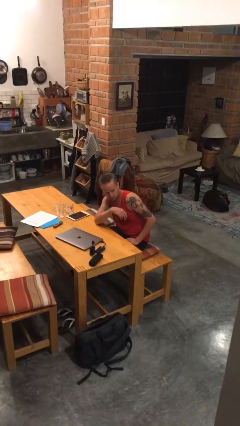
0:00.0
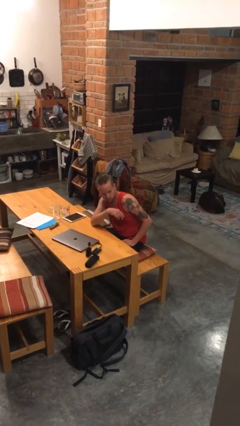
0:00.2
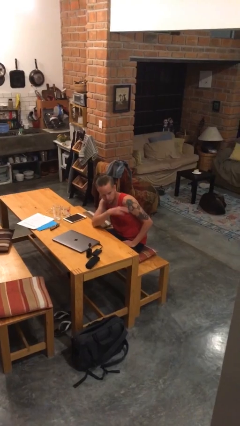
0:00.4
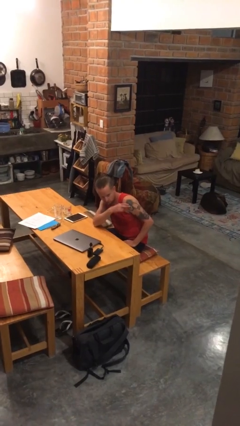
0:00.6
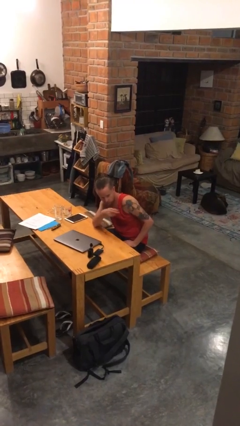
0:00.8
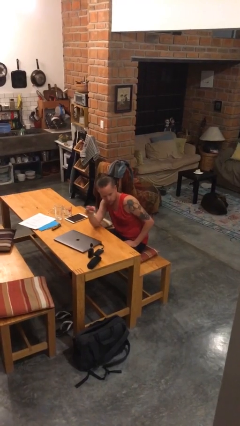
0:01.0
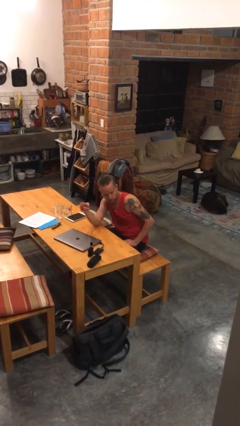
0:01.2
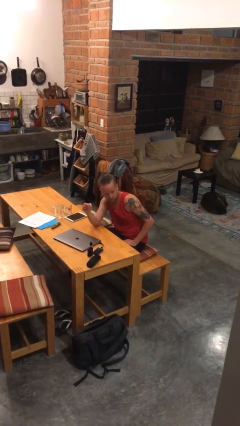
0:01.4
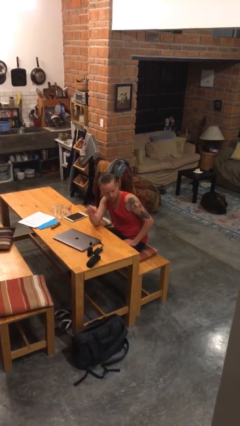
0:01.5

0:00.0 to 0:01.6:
person gestures swipe right

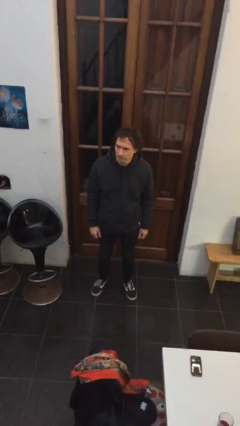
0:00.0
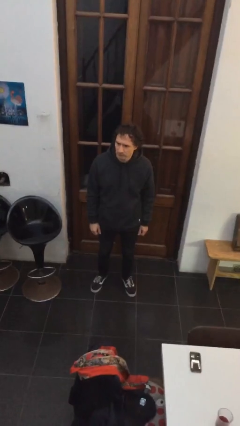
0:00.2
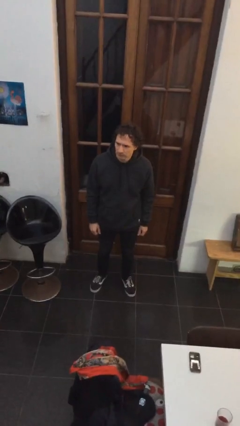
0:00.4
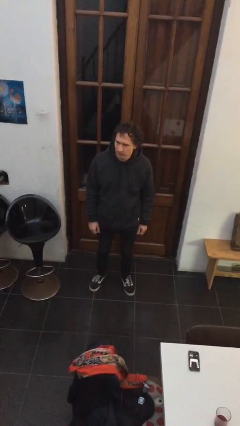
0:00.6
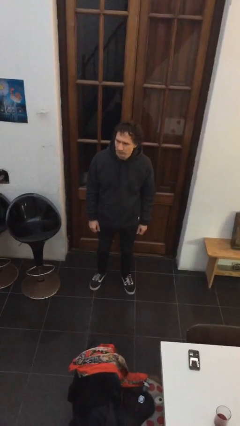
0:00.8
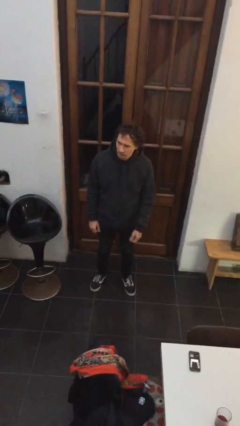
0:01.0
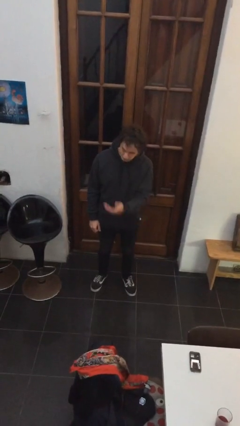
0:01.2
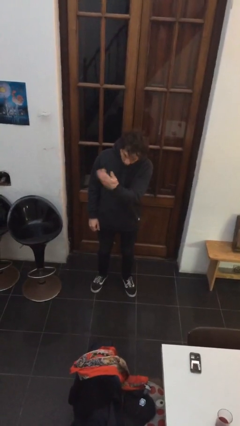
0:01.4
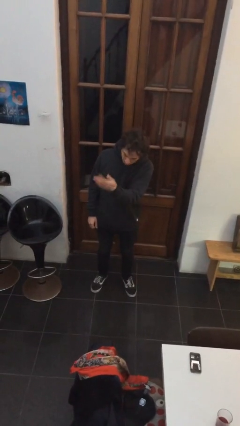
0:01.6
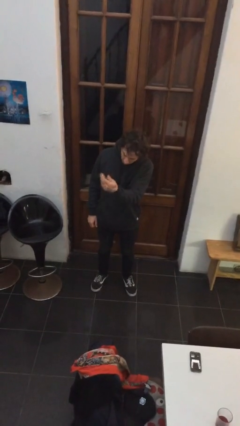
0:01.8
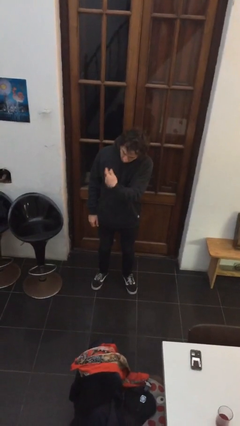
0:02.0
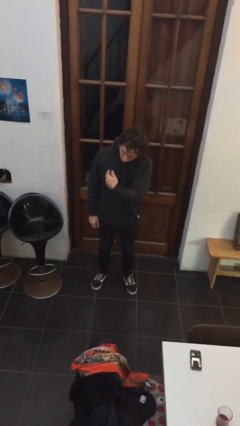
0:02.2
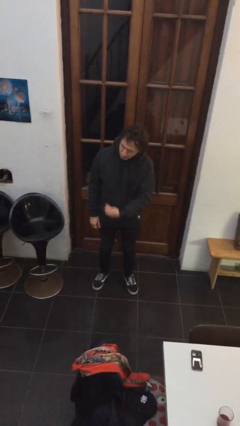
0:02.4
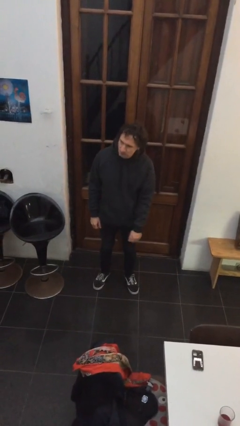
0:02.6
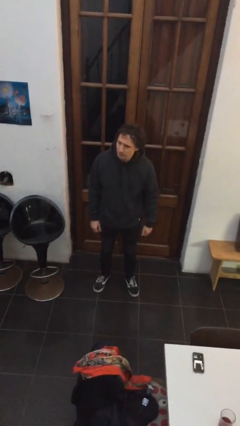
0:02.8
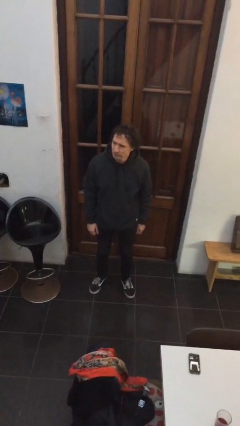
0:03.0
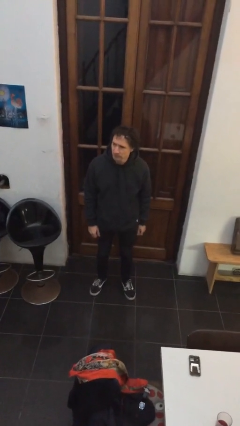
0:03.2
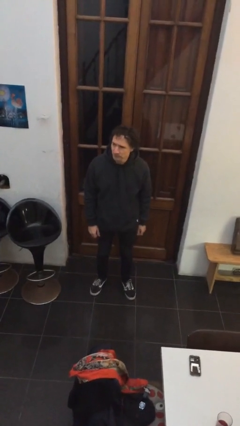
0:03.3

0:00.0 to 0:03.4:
person gestures come here

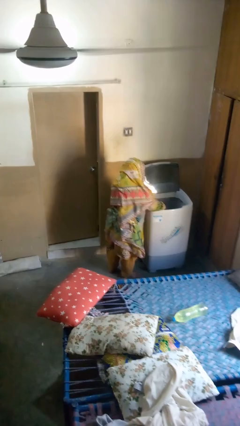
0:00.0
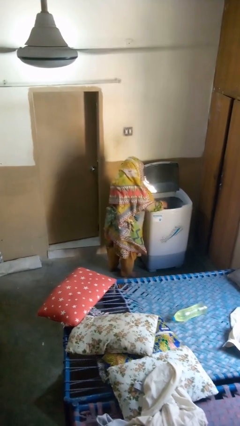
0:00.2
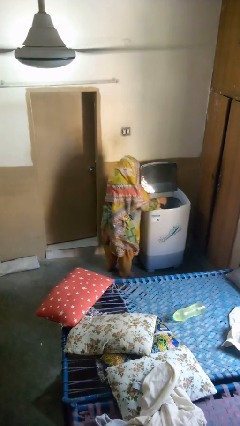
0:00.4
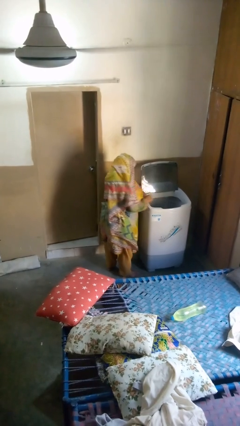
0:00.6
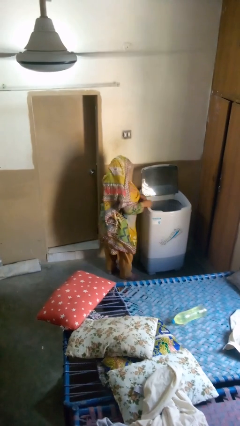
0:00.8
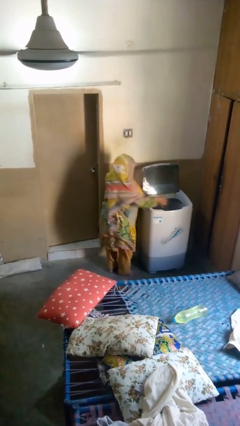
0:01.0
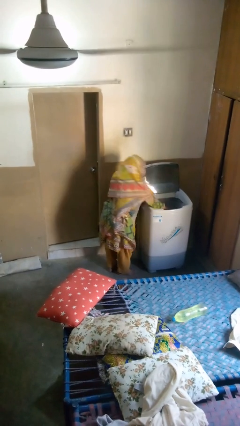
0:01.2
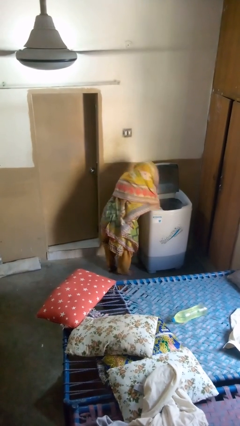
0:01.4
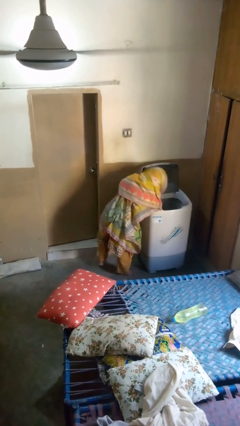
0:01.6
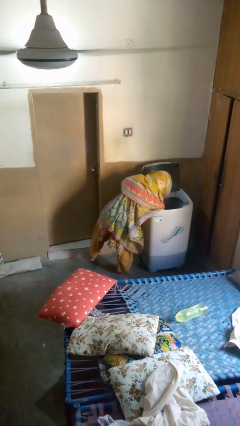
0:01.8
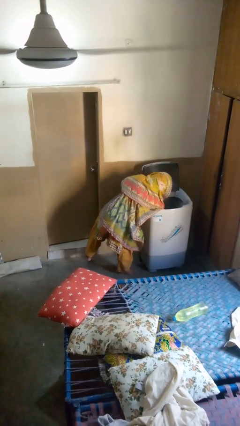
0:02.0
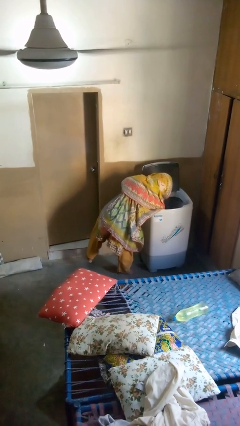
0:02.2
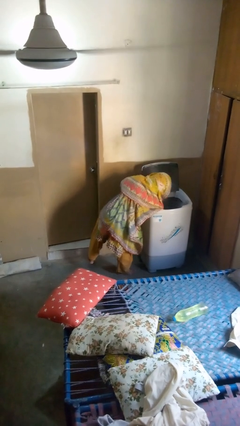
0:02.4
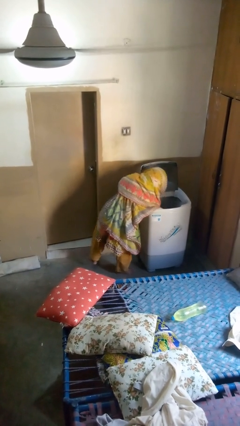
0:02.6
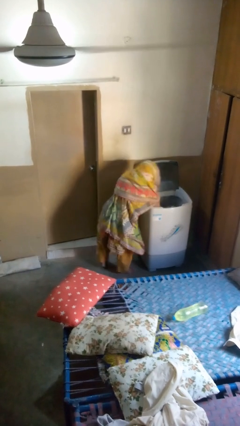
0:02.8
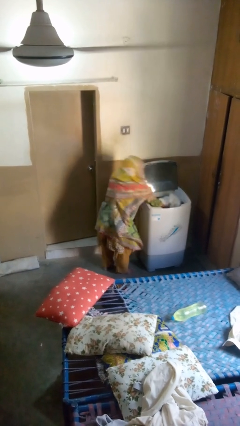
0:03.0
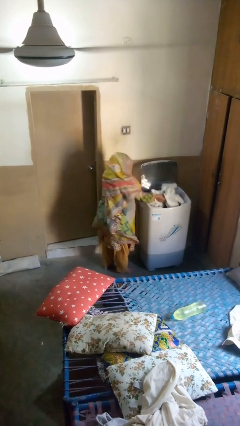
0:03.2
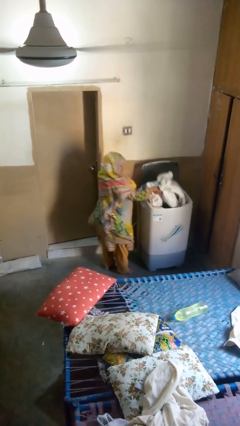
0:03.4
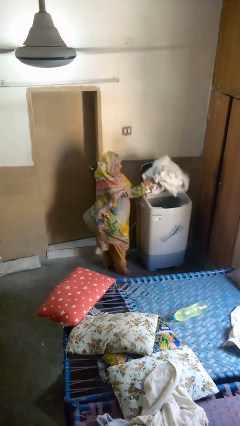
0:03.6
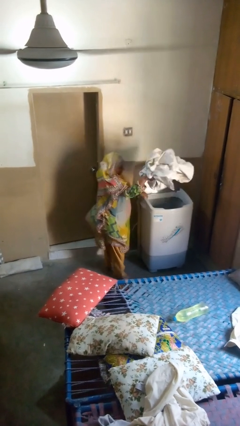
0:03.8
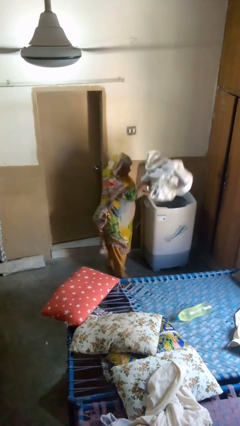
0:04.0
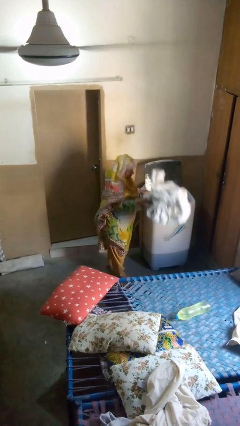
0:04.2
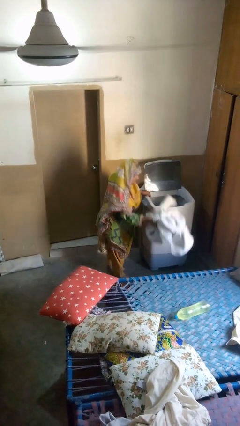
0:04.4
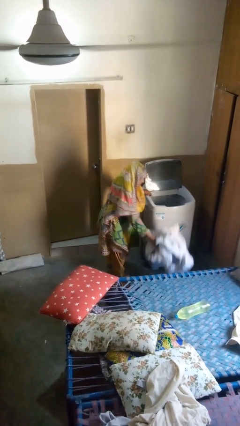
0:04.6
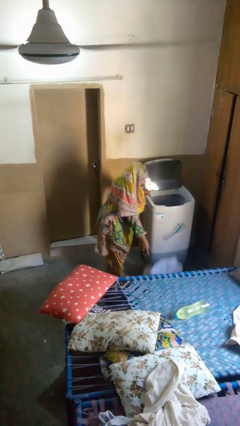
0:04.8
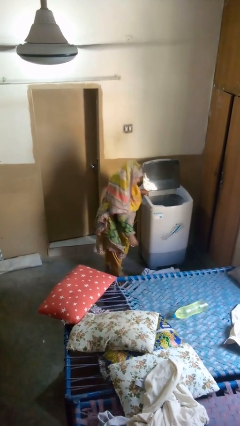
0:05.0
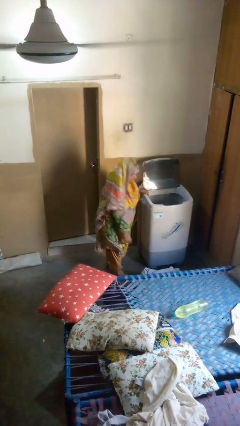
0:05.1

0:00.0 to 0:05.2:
person unloads clotheswasher

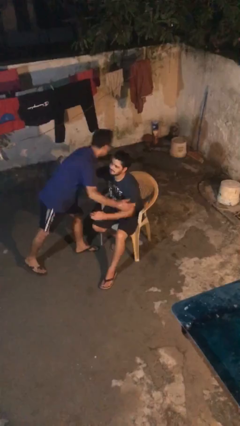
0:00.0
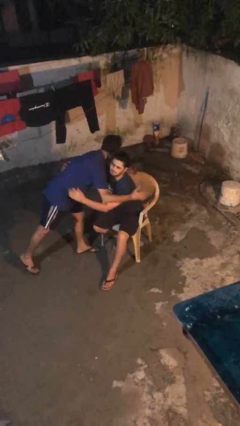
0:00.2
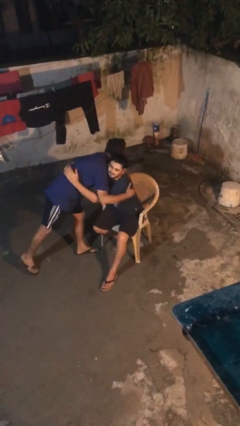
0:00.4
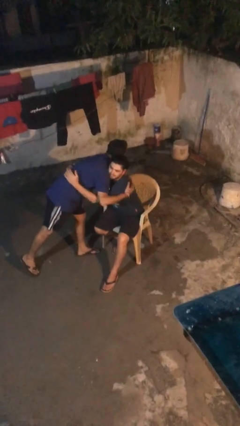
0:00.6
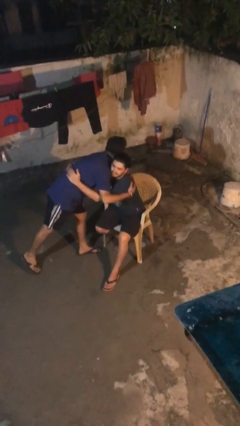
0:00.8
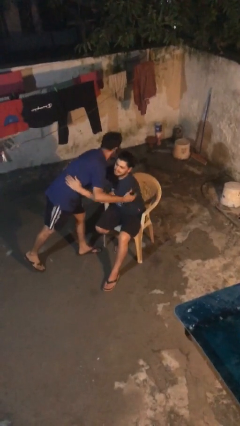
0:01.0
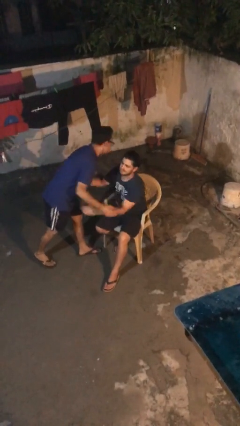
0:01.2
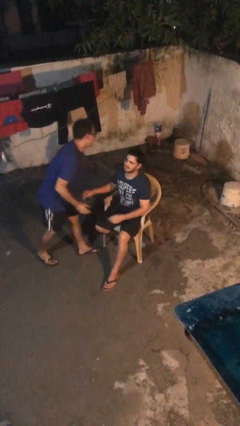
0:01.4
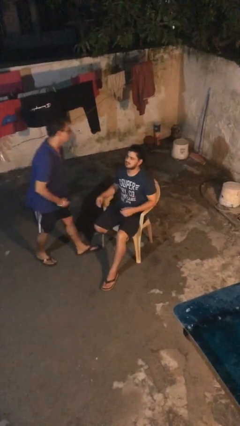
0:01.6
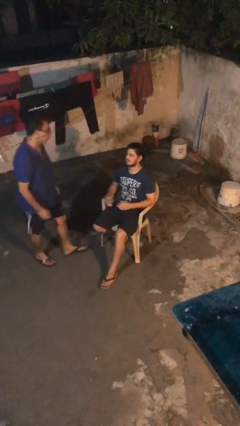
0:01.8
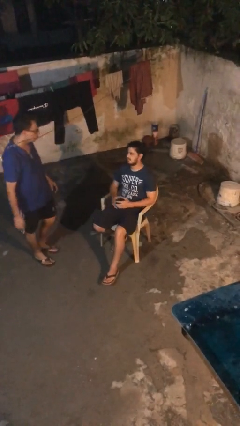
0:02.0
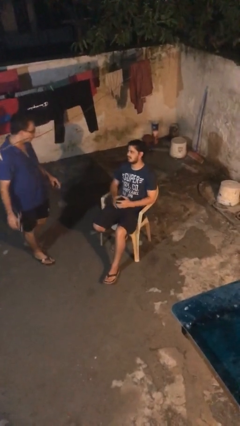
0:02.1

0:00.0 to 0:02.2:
person embraces person

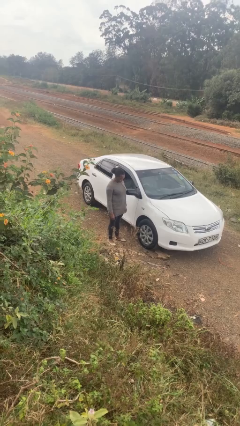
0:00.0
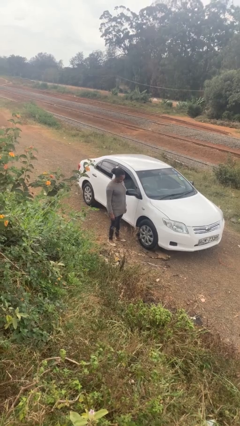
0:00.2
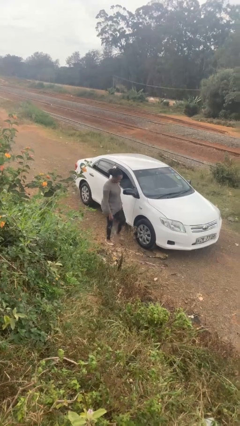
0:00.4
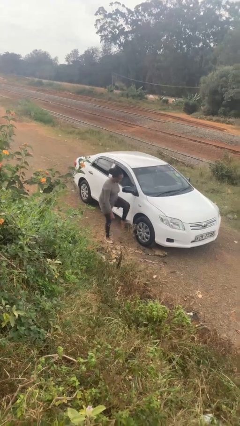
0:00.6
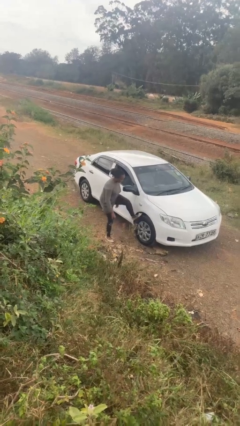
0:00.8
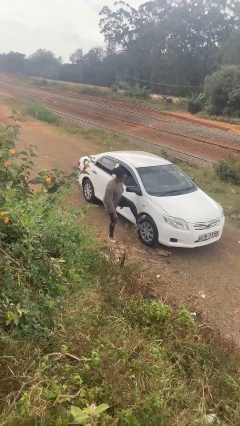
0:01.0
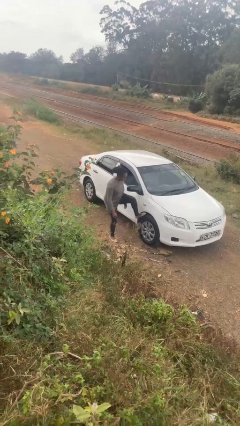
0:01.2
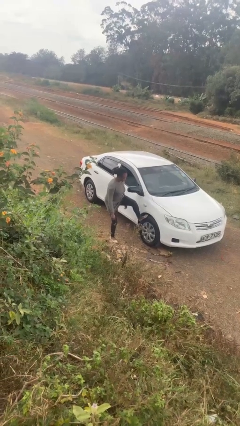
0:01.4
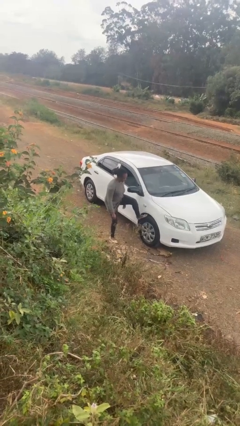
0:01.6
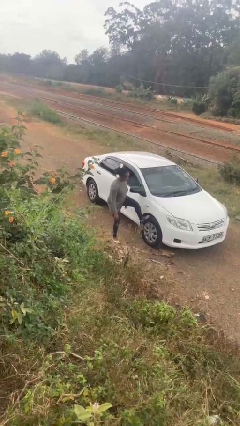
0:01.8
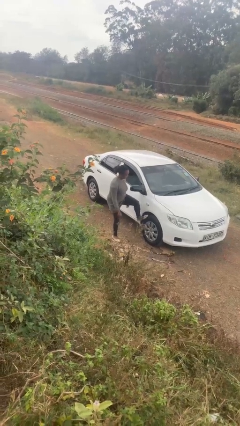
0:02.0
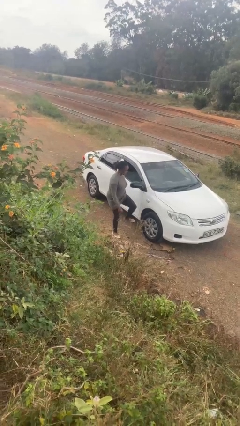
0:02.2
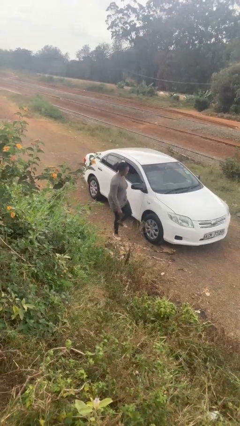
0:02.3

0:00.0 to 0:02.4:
person kicks car tires

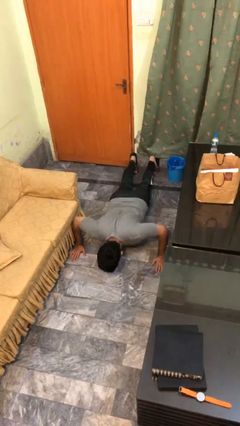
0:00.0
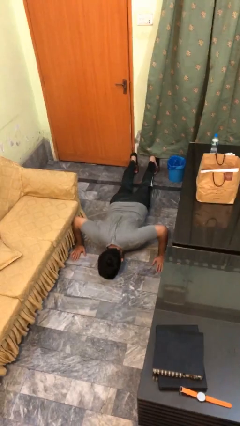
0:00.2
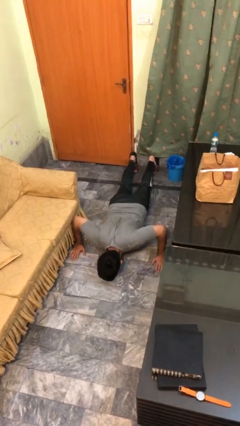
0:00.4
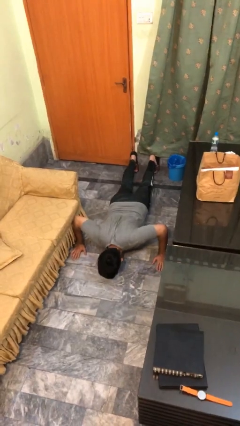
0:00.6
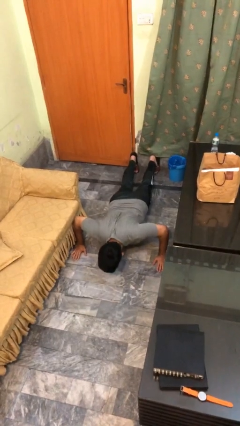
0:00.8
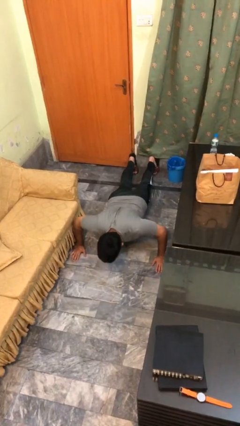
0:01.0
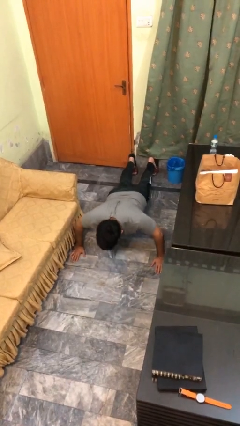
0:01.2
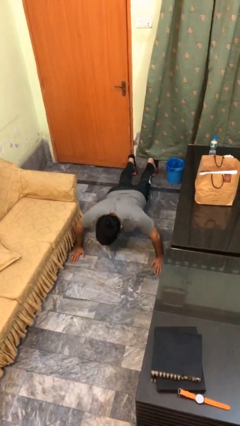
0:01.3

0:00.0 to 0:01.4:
person exercises with pushup

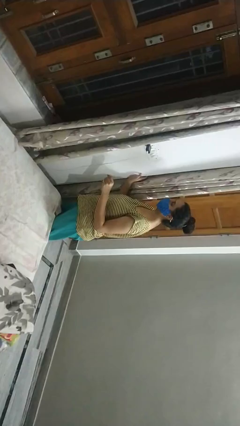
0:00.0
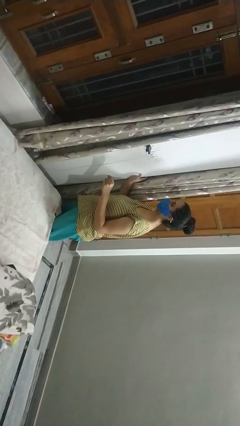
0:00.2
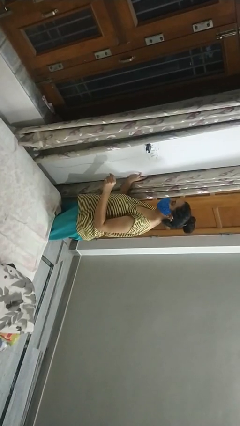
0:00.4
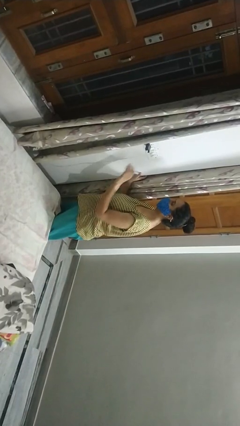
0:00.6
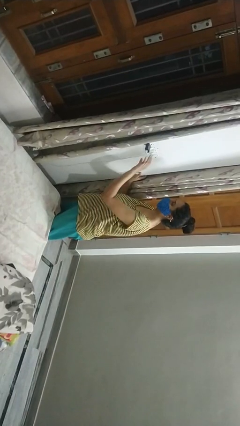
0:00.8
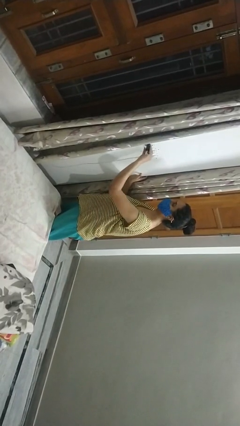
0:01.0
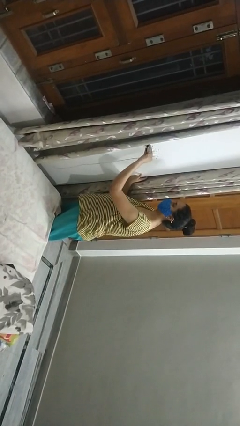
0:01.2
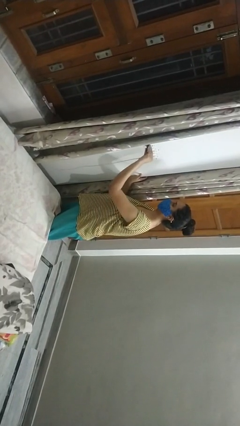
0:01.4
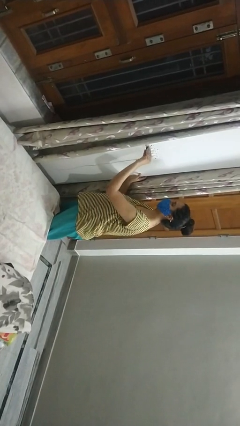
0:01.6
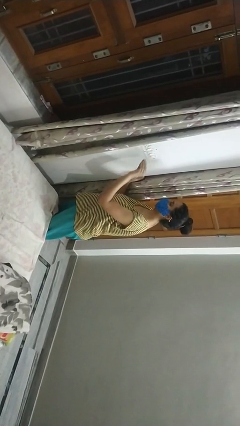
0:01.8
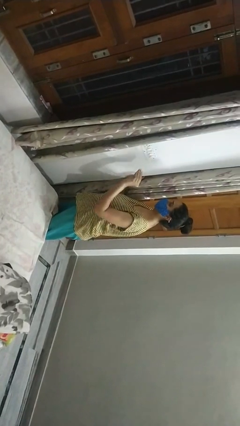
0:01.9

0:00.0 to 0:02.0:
person unplugs from electrical socket
